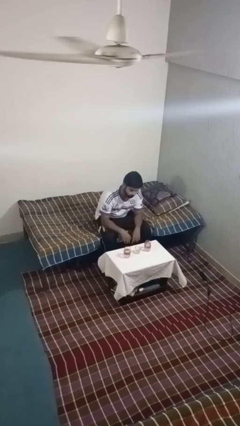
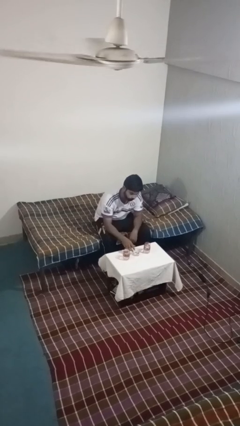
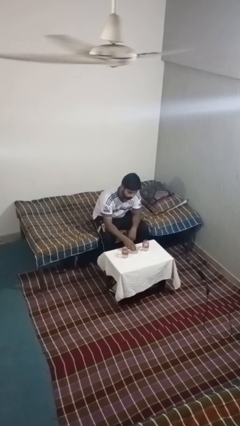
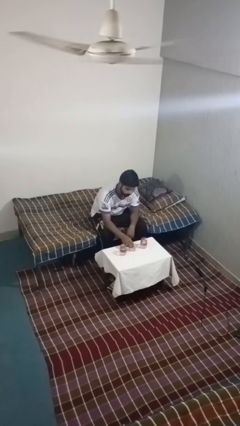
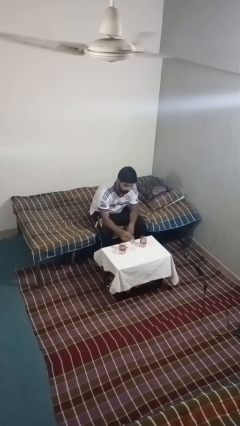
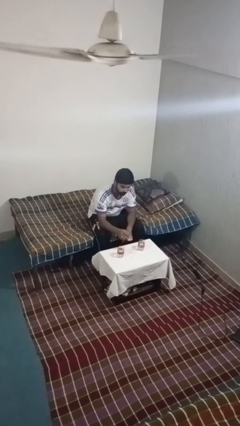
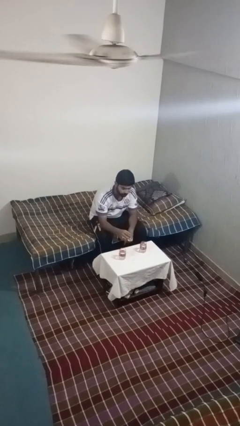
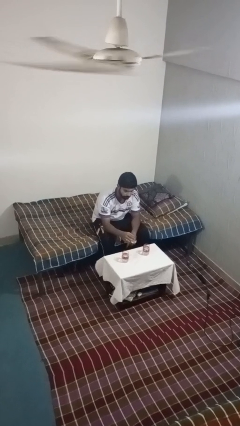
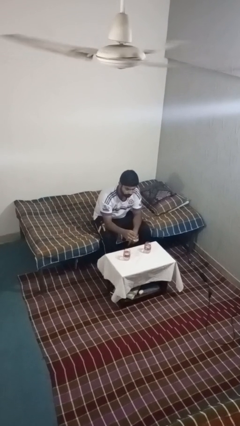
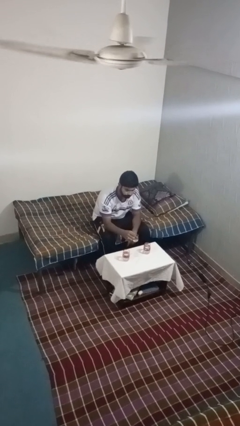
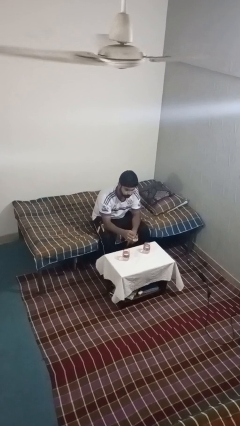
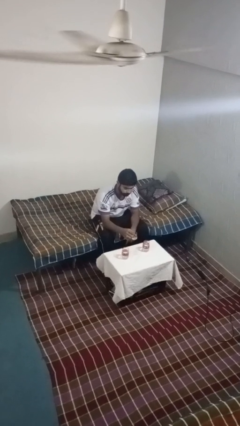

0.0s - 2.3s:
person picks up object from table

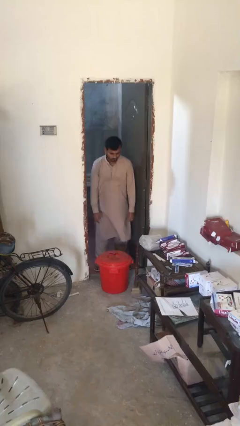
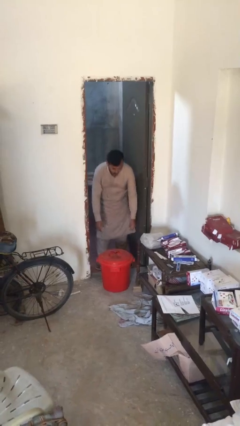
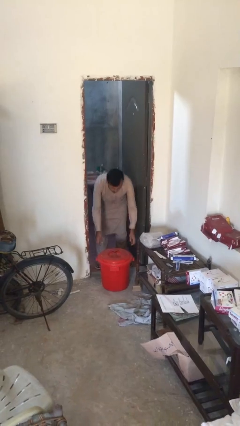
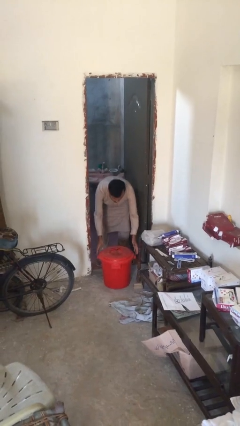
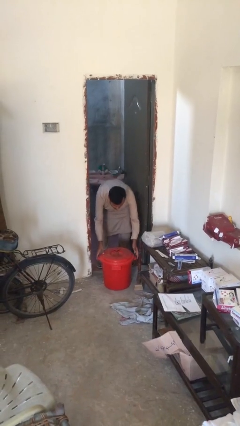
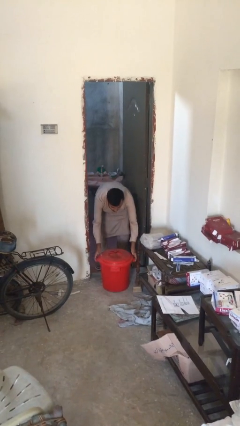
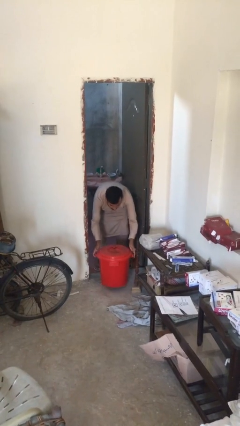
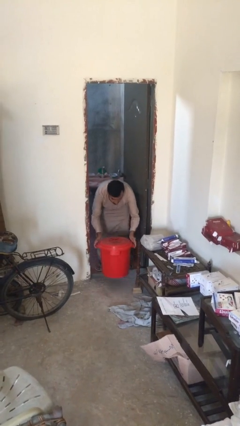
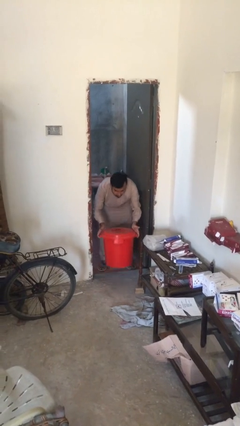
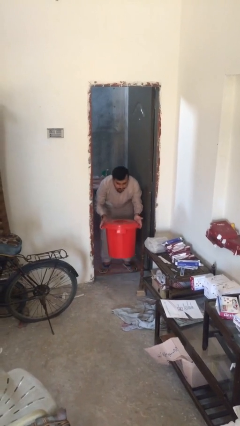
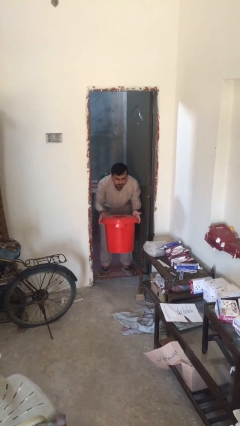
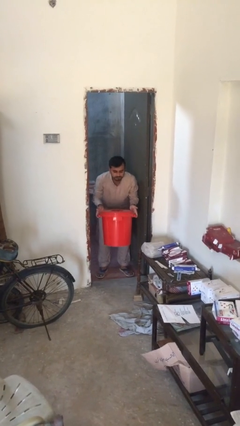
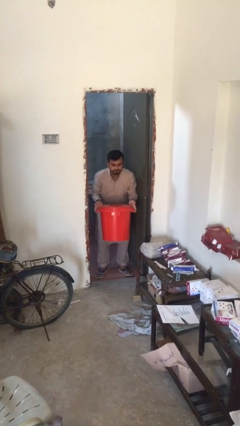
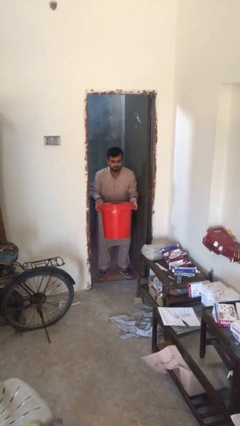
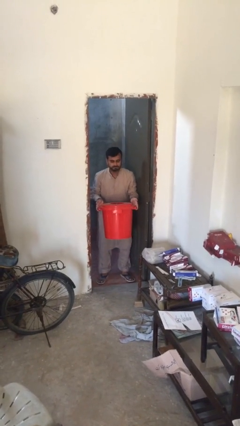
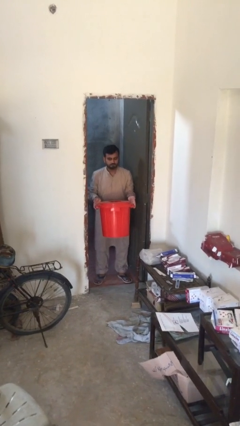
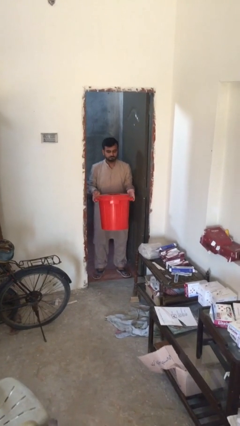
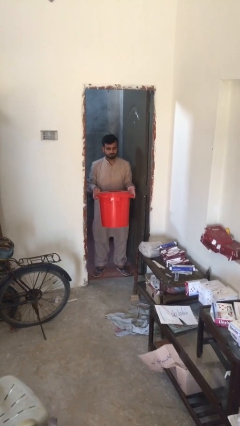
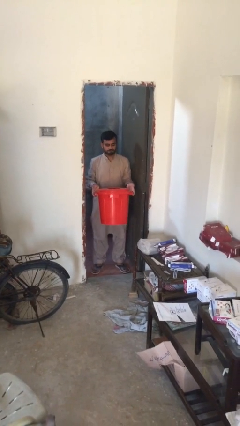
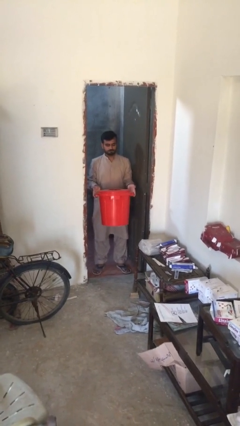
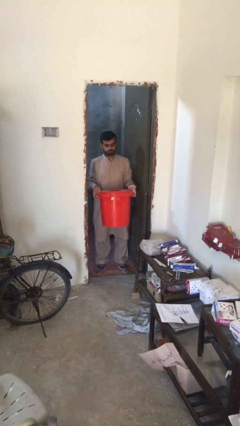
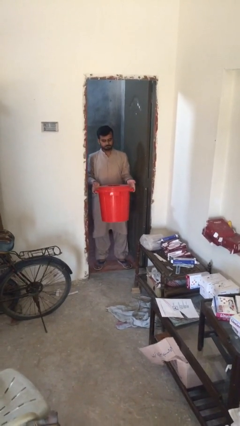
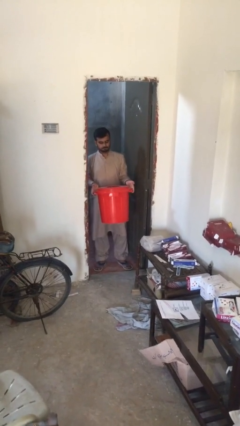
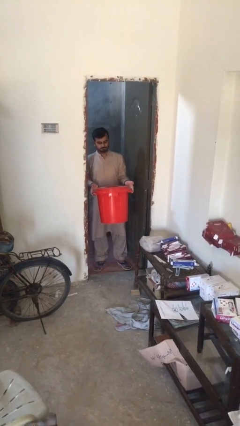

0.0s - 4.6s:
person picks up object from floor

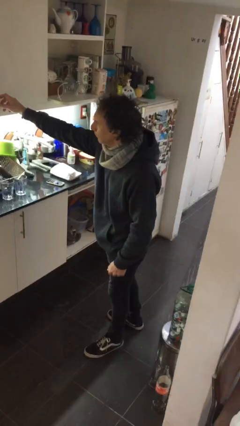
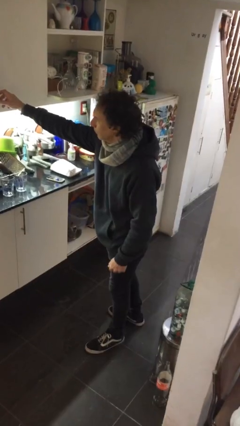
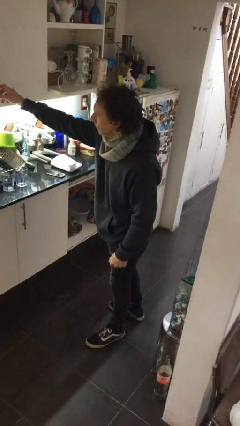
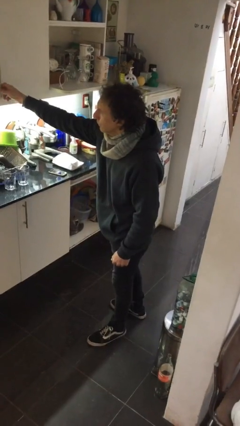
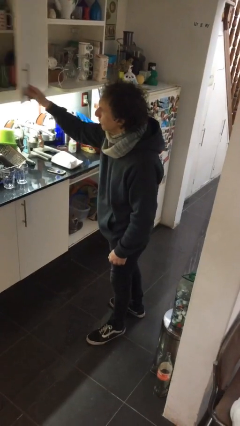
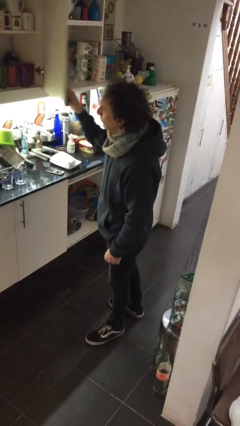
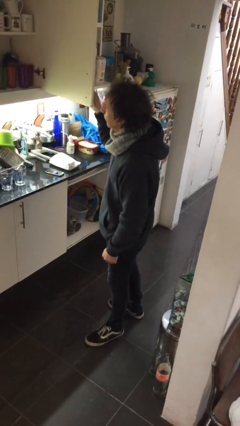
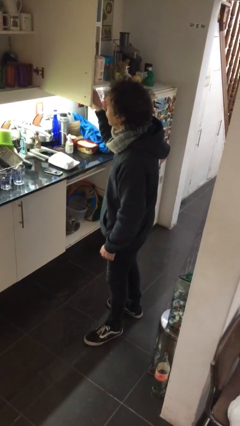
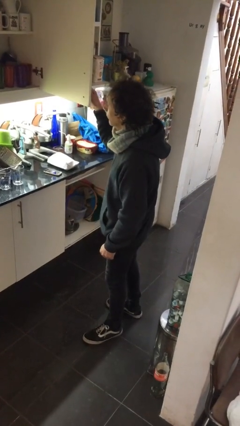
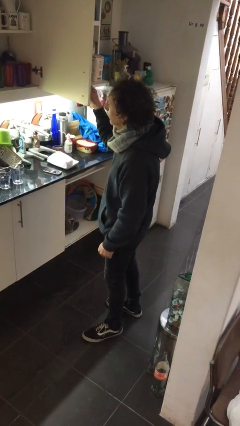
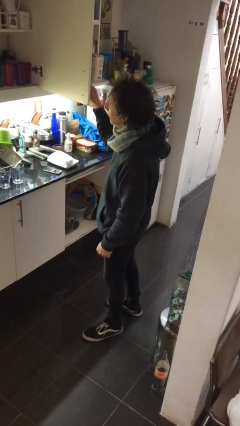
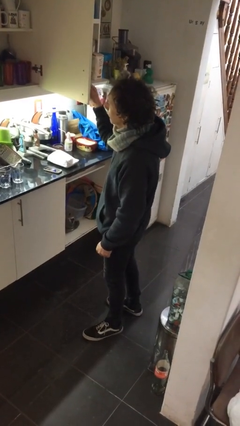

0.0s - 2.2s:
person closes cabinet

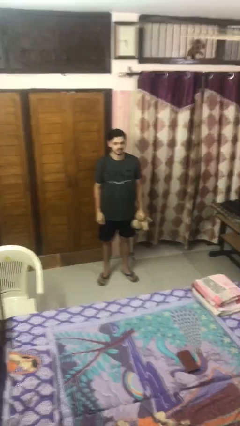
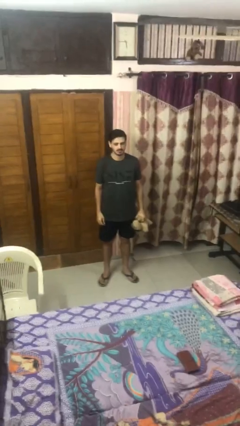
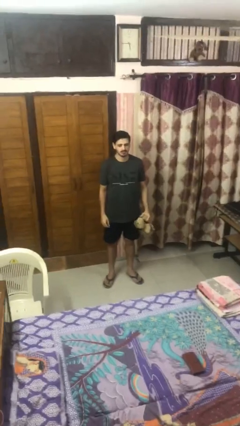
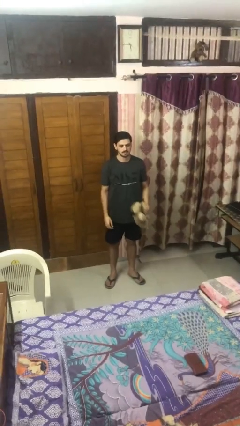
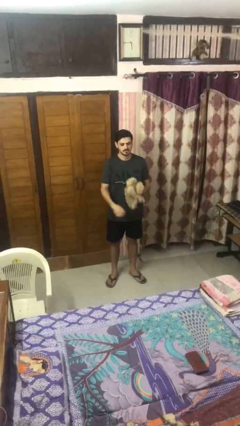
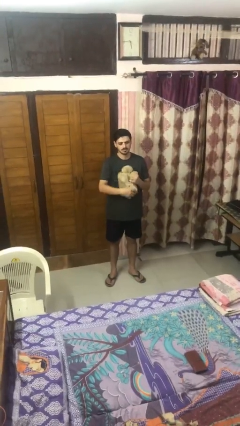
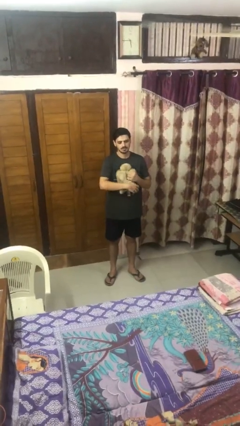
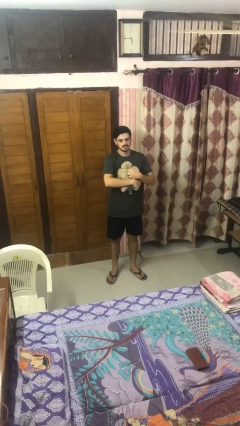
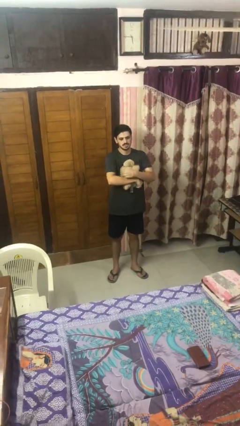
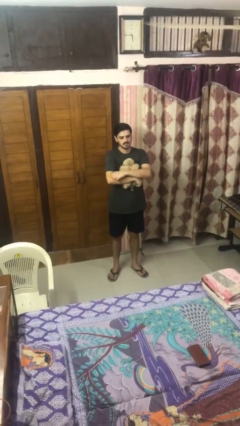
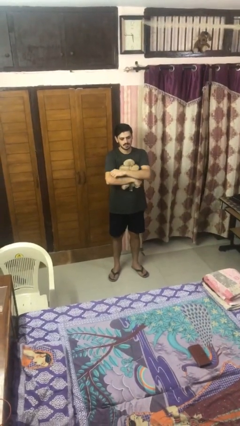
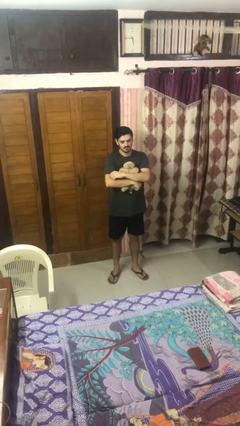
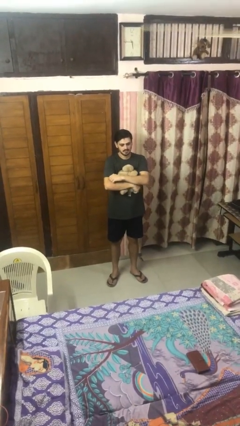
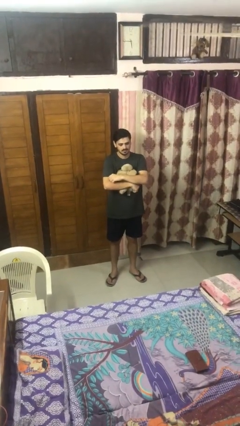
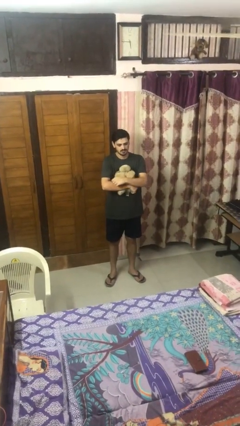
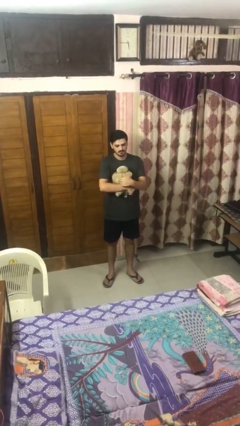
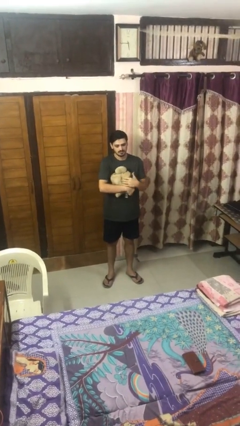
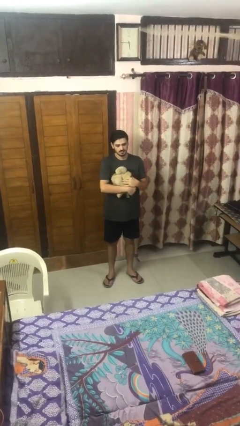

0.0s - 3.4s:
person hugs stuffed animal

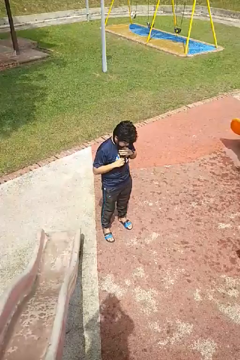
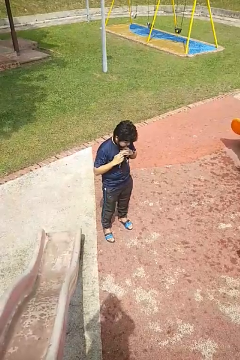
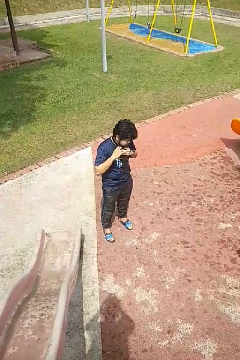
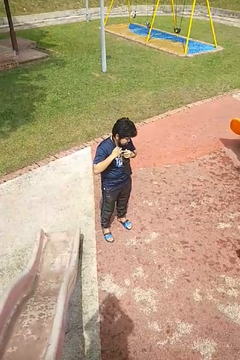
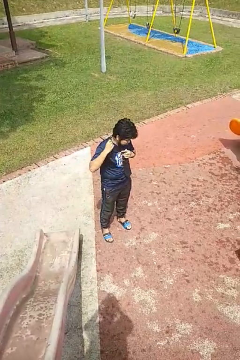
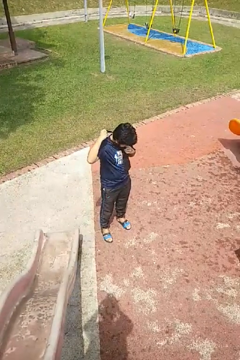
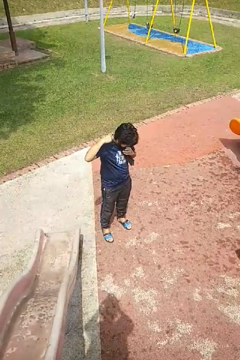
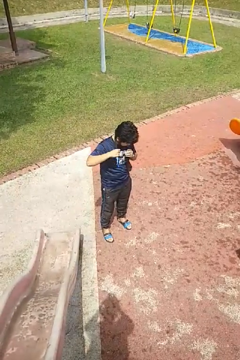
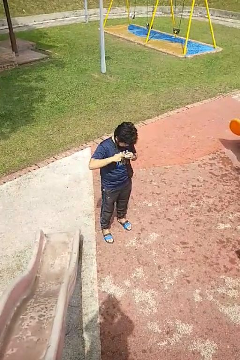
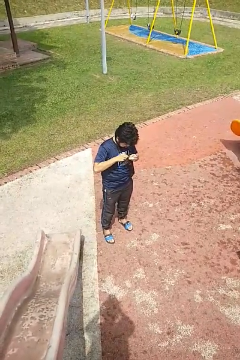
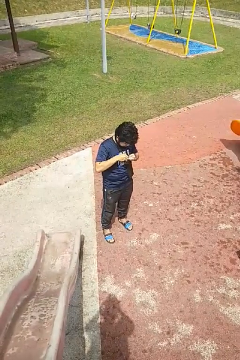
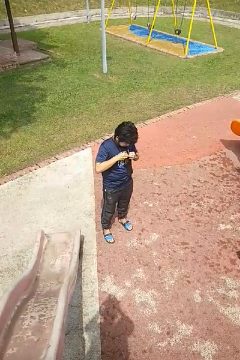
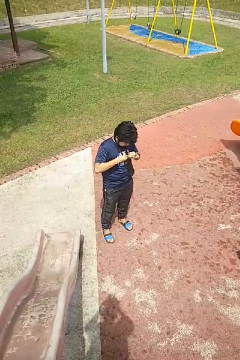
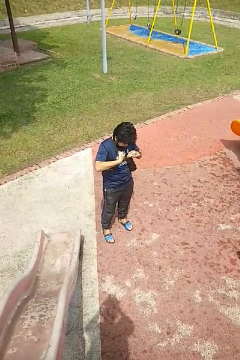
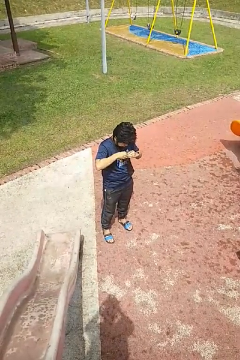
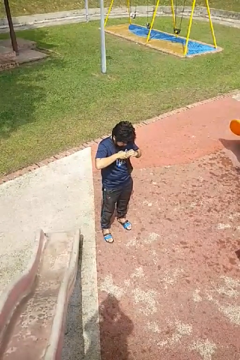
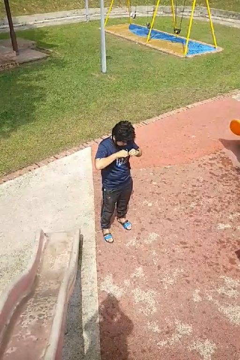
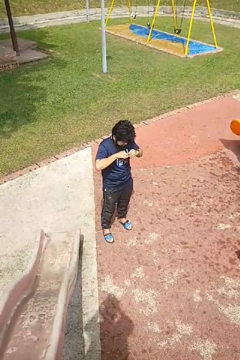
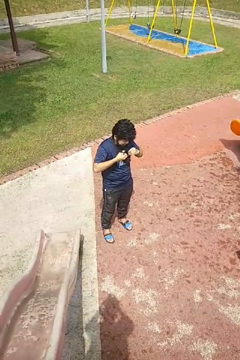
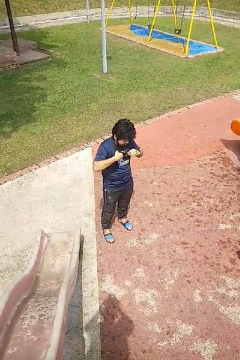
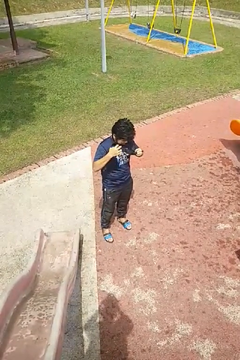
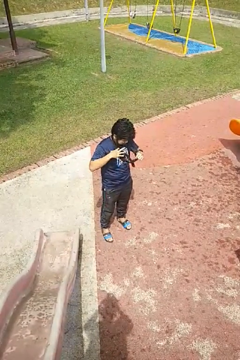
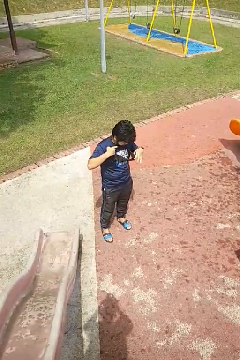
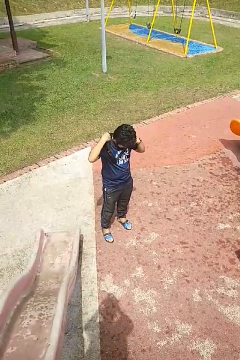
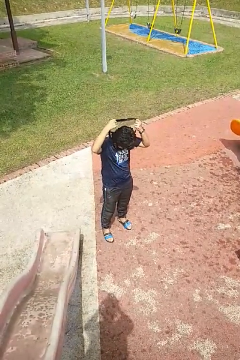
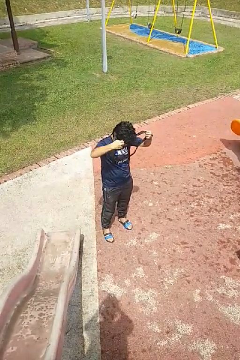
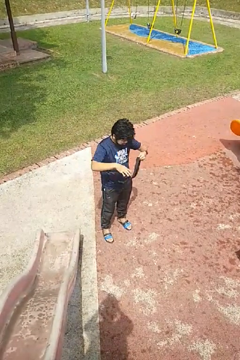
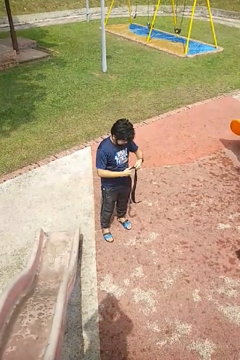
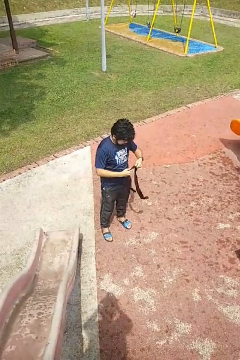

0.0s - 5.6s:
person takes off necktie

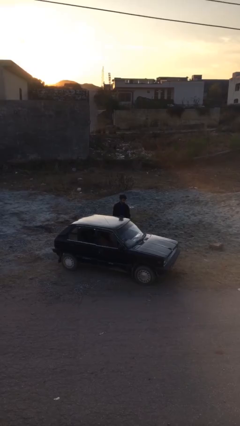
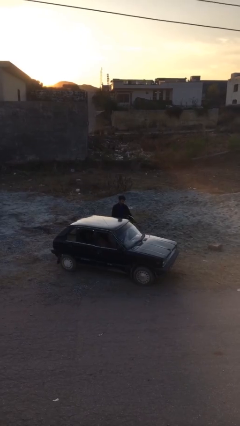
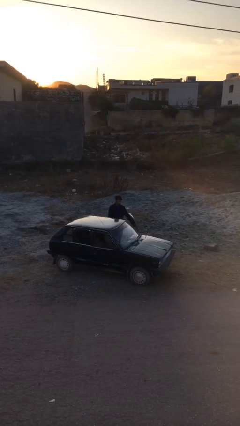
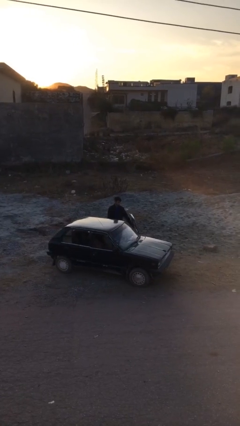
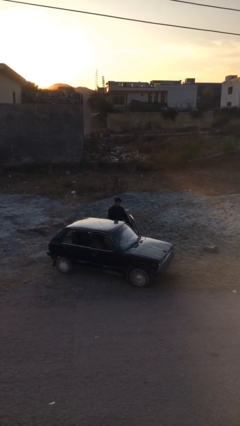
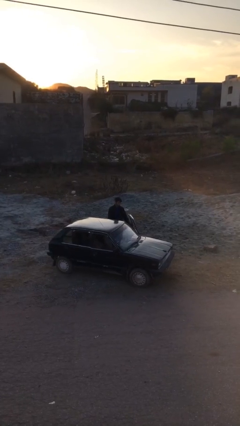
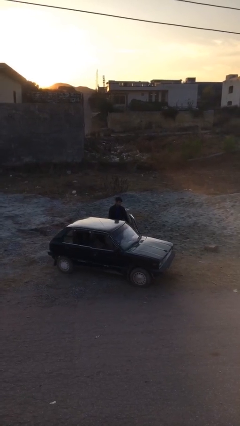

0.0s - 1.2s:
person opens car door
